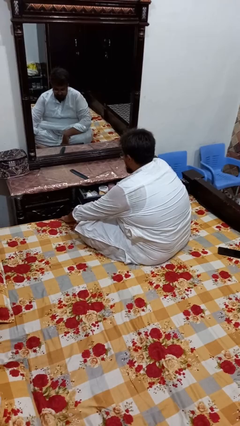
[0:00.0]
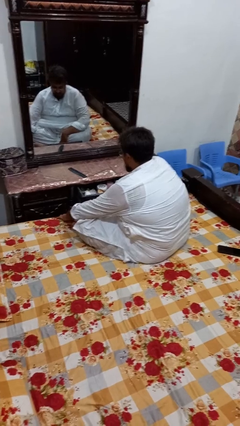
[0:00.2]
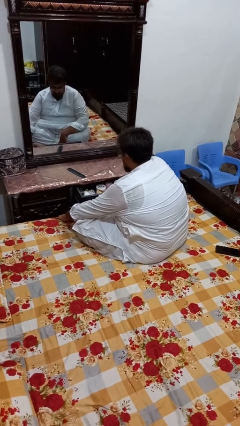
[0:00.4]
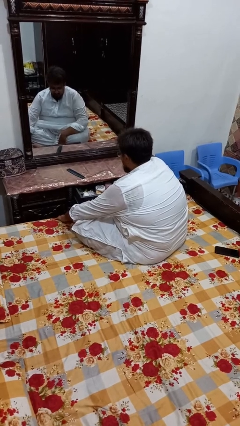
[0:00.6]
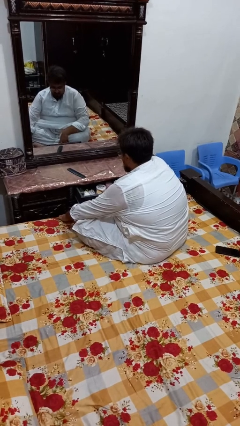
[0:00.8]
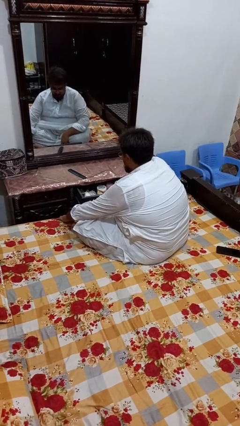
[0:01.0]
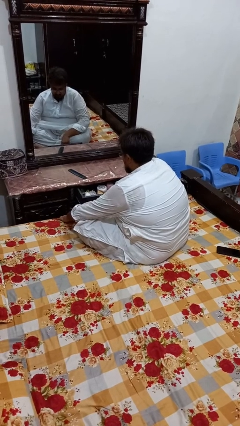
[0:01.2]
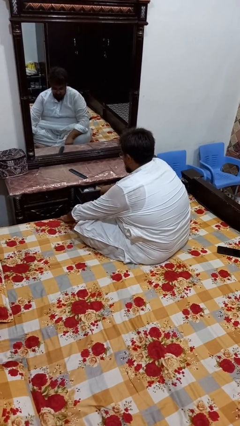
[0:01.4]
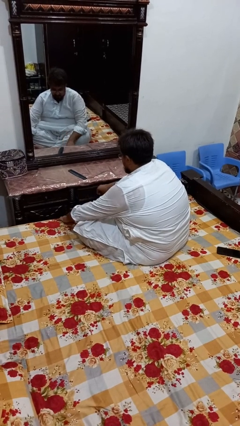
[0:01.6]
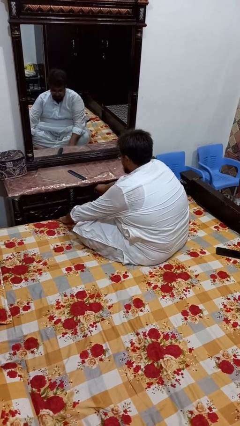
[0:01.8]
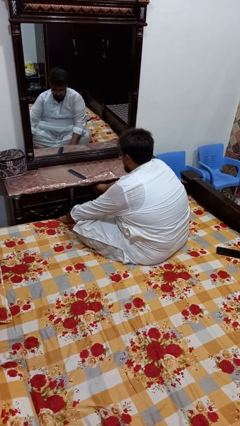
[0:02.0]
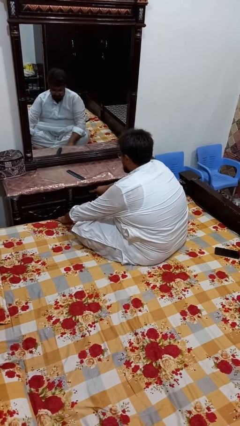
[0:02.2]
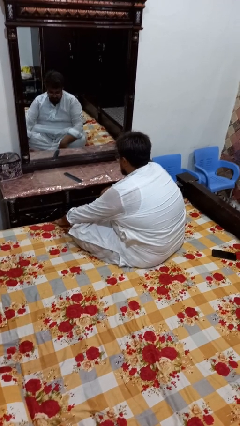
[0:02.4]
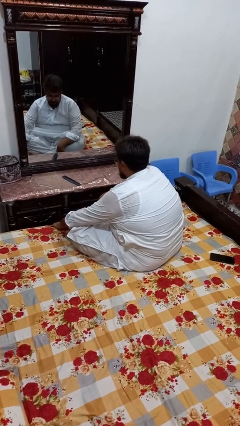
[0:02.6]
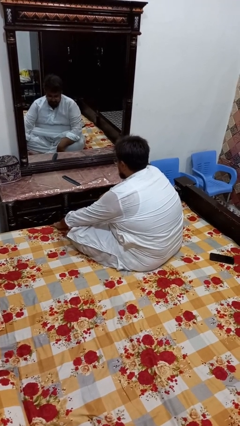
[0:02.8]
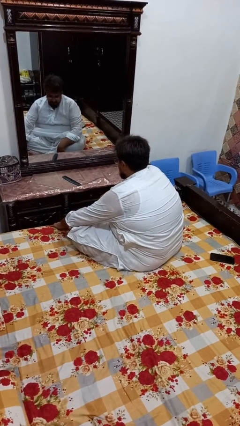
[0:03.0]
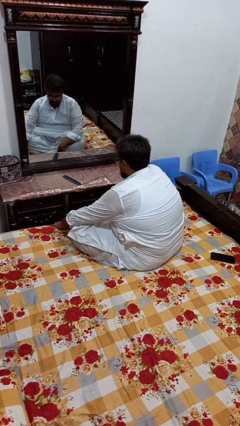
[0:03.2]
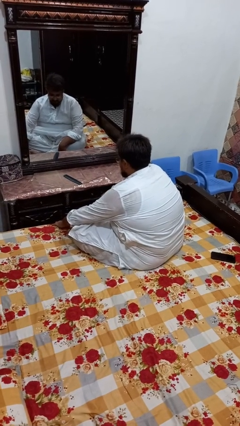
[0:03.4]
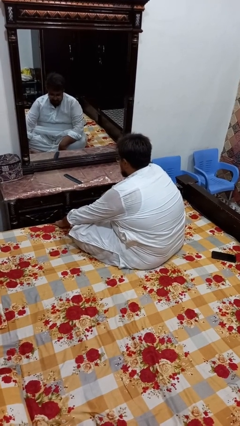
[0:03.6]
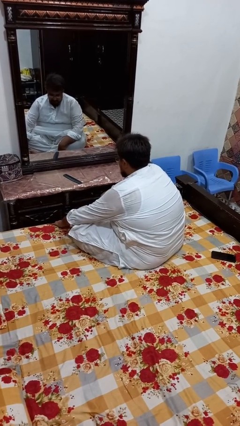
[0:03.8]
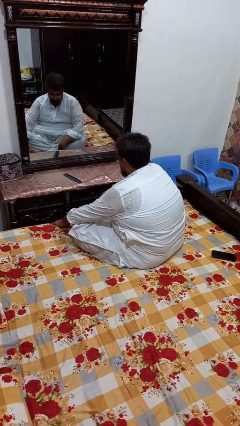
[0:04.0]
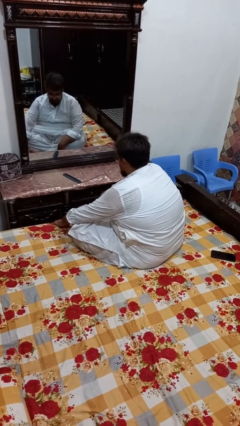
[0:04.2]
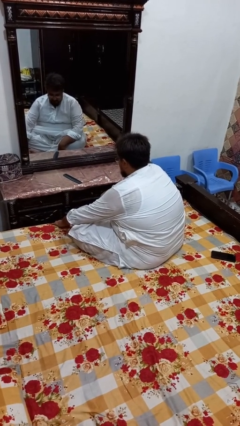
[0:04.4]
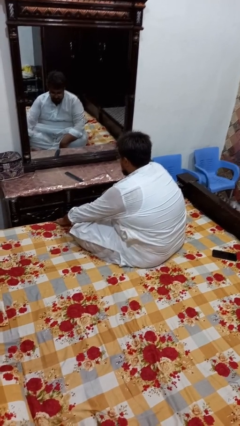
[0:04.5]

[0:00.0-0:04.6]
person closes dresser drawer

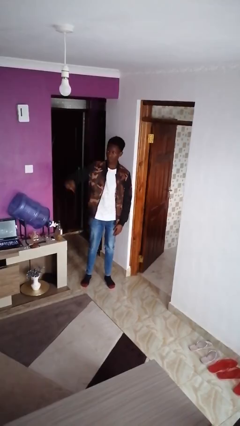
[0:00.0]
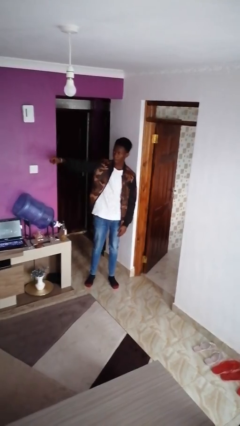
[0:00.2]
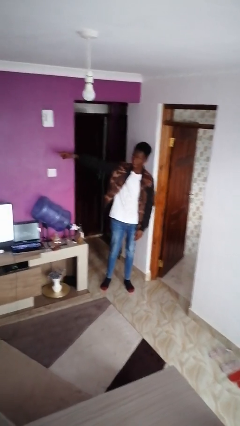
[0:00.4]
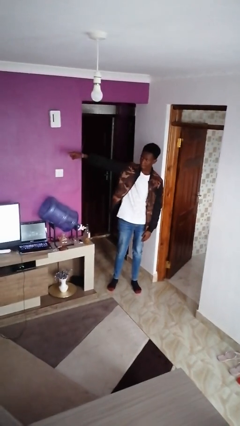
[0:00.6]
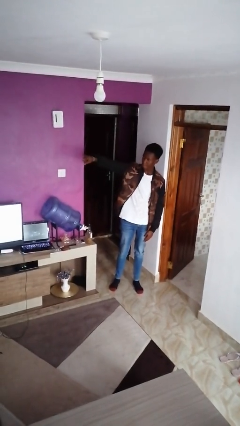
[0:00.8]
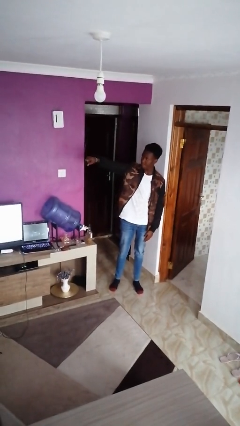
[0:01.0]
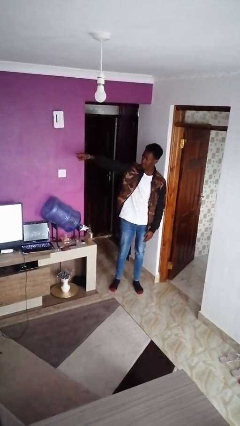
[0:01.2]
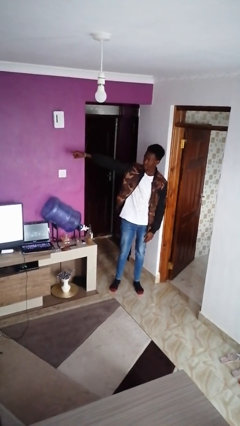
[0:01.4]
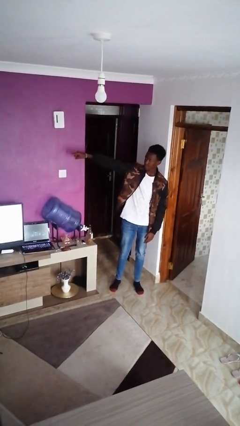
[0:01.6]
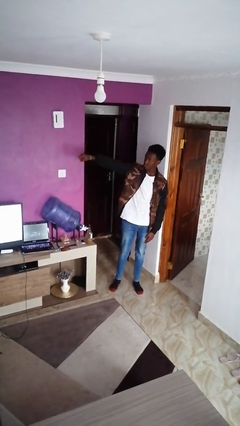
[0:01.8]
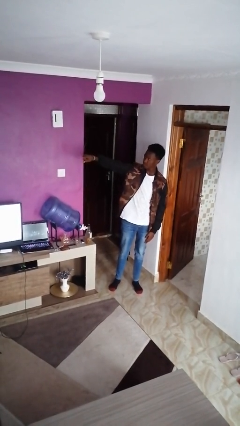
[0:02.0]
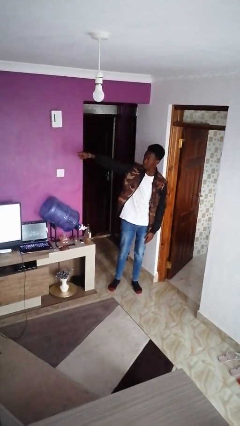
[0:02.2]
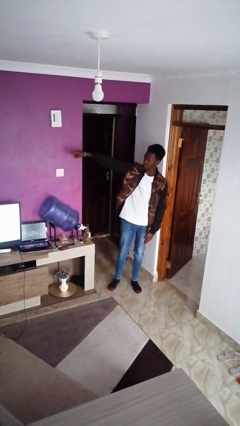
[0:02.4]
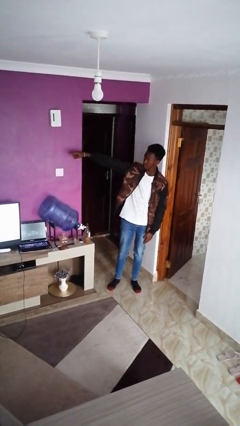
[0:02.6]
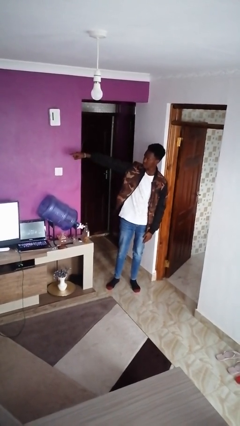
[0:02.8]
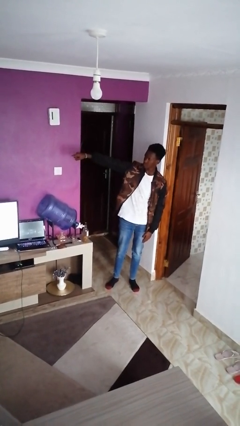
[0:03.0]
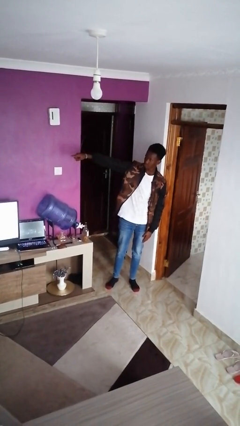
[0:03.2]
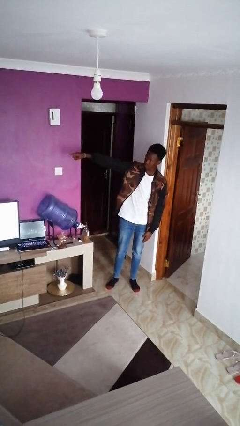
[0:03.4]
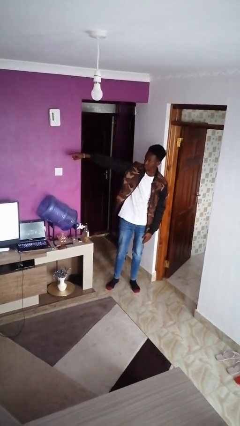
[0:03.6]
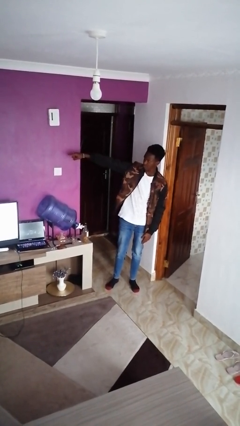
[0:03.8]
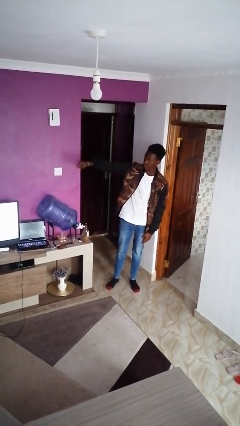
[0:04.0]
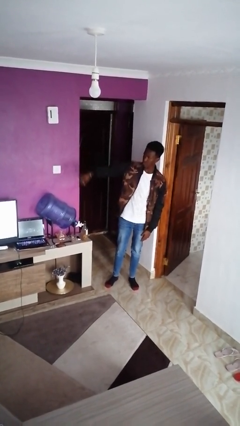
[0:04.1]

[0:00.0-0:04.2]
person points at person

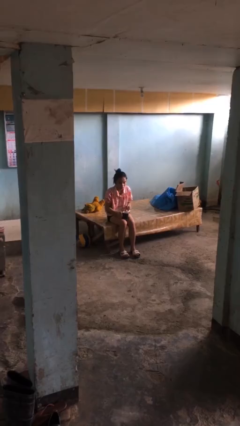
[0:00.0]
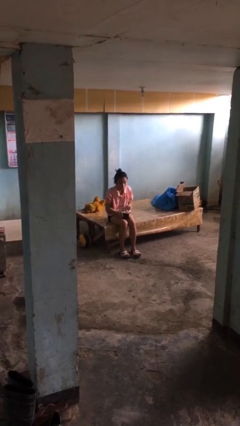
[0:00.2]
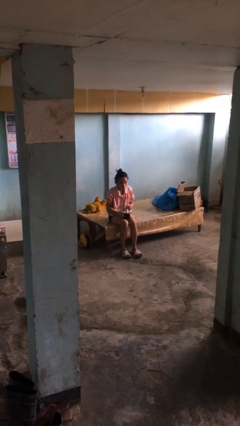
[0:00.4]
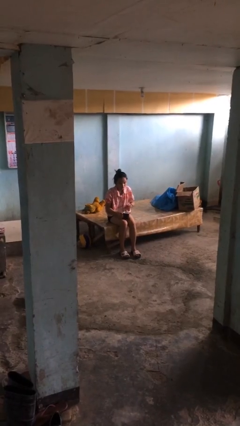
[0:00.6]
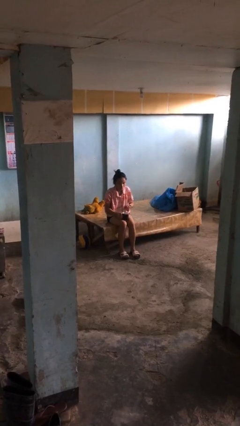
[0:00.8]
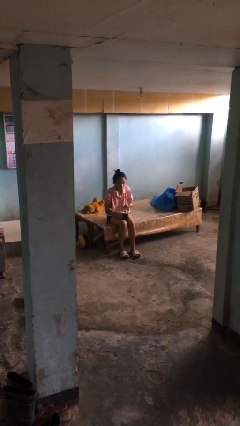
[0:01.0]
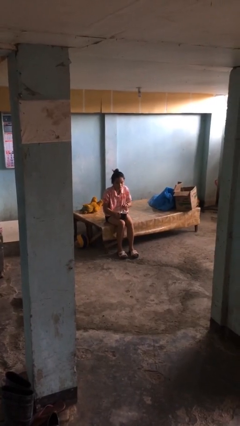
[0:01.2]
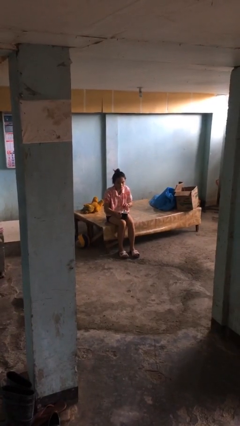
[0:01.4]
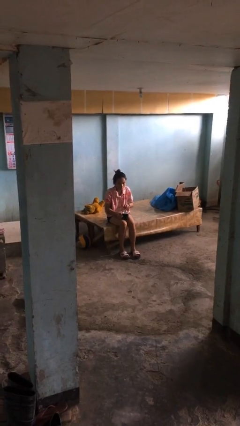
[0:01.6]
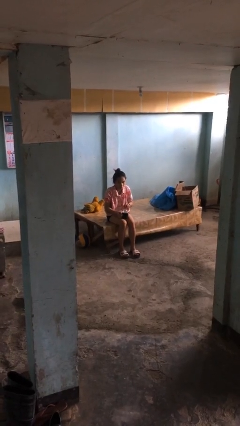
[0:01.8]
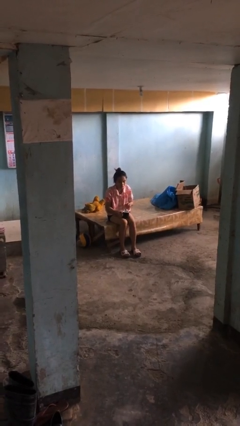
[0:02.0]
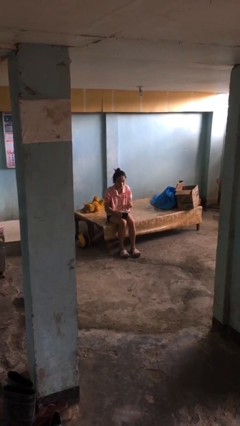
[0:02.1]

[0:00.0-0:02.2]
person stirs mug

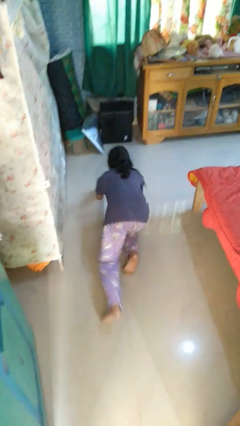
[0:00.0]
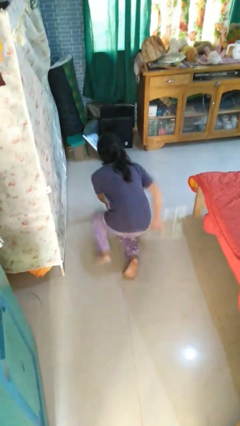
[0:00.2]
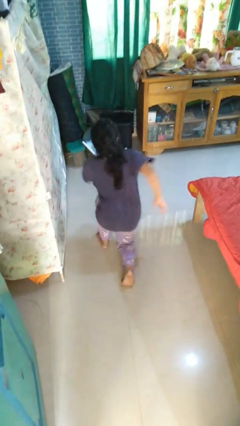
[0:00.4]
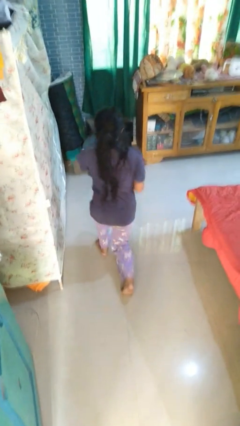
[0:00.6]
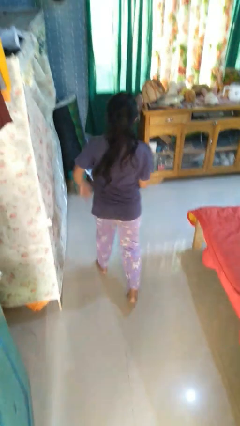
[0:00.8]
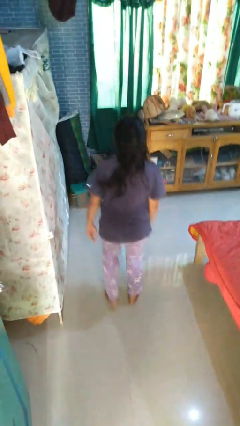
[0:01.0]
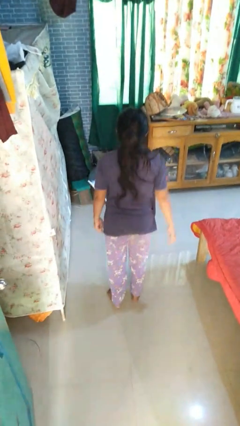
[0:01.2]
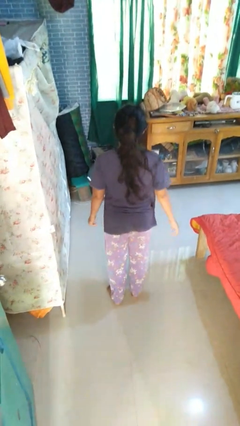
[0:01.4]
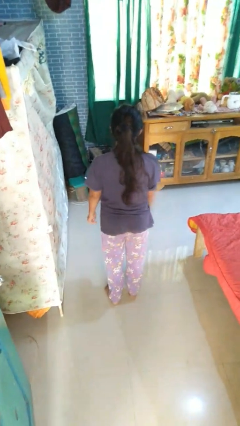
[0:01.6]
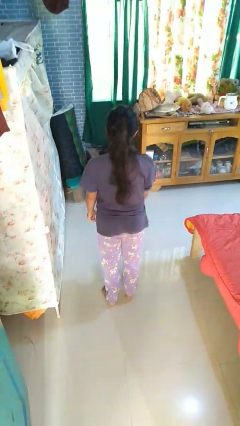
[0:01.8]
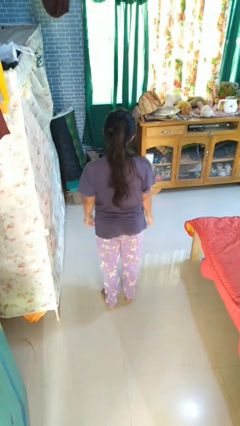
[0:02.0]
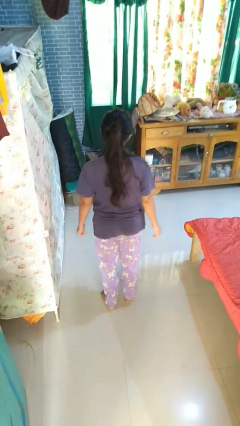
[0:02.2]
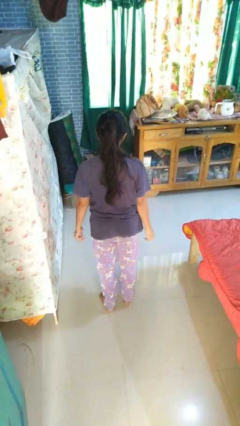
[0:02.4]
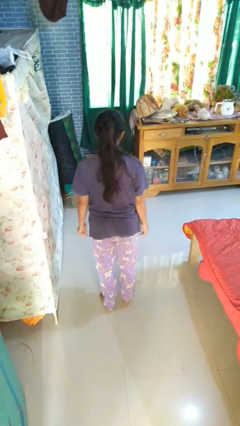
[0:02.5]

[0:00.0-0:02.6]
person stands up from floor

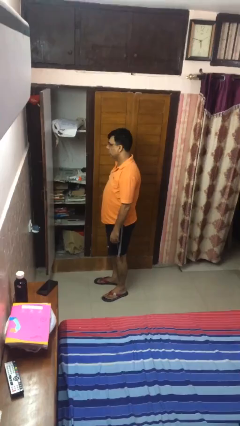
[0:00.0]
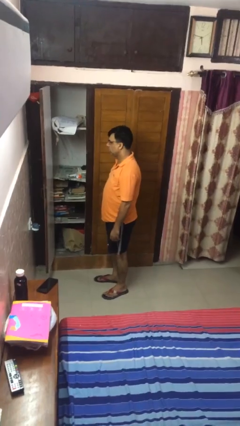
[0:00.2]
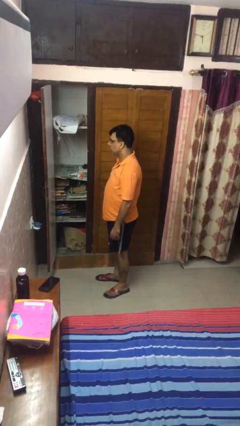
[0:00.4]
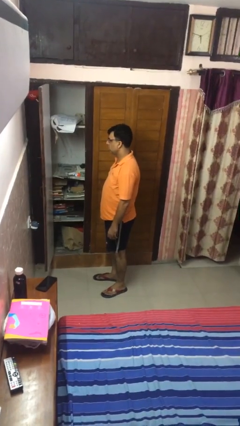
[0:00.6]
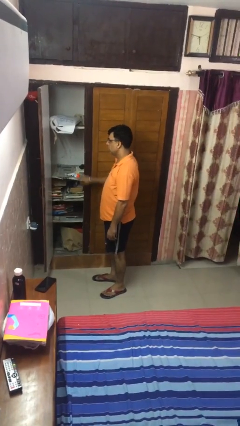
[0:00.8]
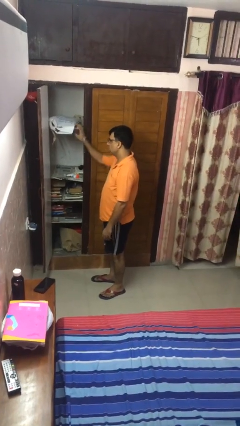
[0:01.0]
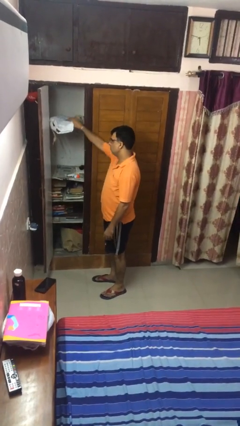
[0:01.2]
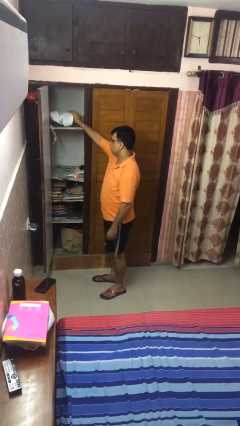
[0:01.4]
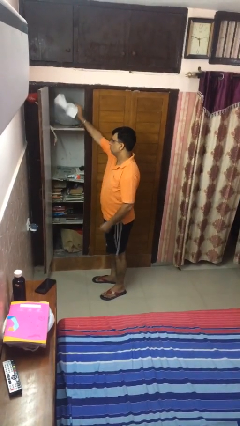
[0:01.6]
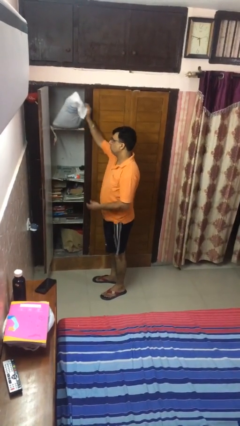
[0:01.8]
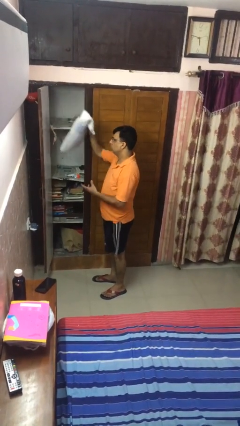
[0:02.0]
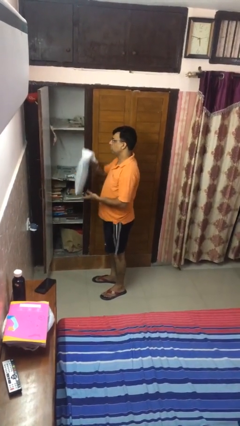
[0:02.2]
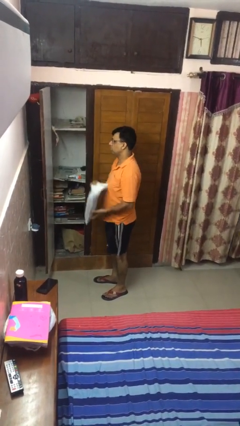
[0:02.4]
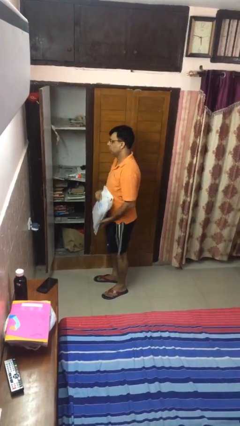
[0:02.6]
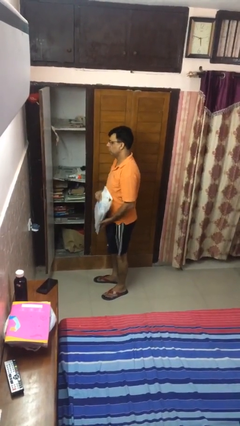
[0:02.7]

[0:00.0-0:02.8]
person picks up object from shelf

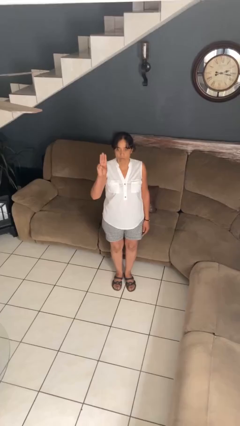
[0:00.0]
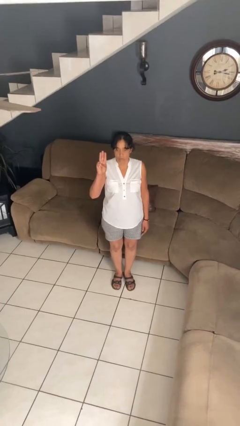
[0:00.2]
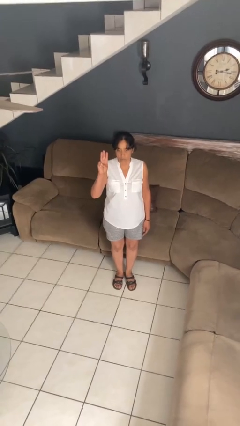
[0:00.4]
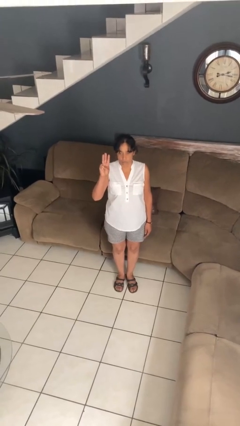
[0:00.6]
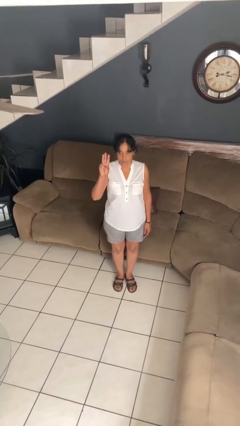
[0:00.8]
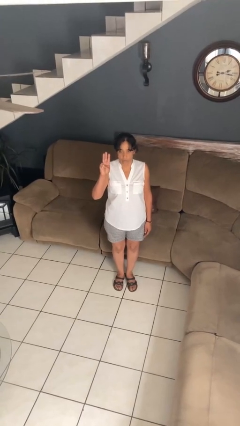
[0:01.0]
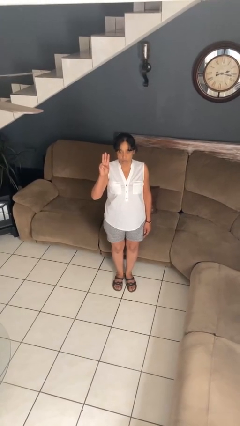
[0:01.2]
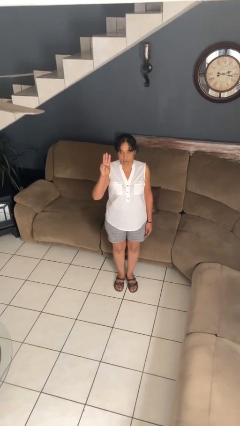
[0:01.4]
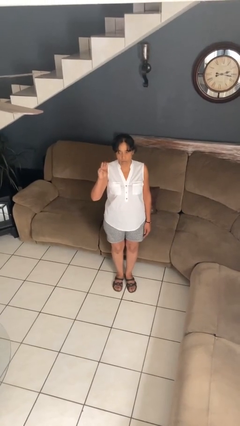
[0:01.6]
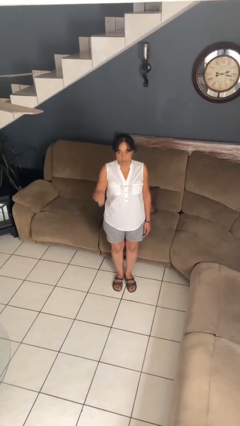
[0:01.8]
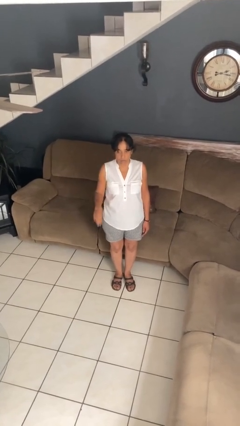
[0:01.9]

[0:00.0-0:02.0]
person gestures number three
